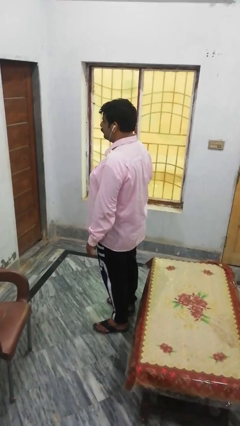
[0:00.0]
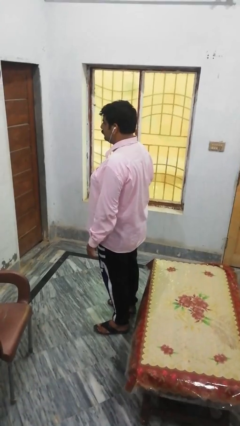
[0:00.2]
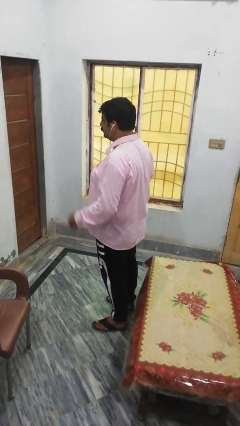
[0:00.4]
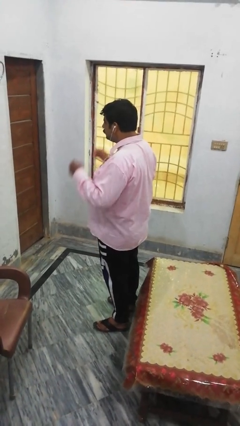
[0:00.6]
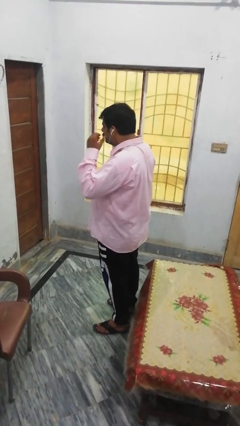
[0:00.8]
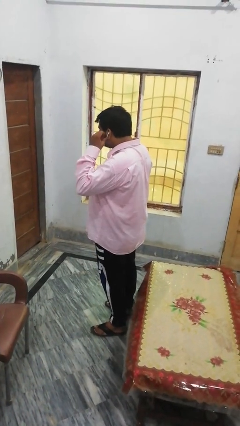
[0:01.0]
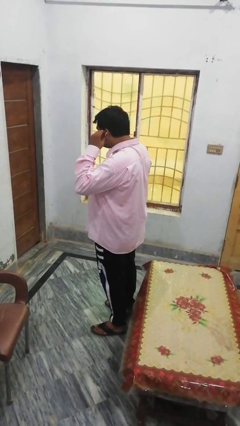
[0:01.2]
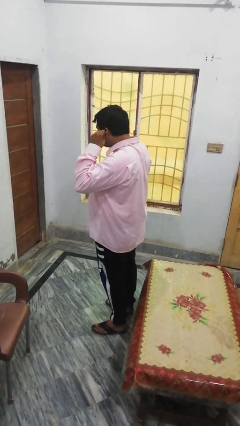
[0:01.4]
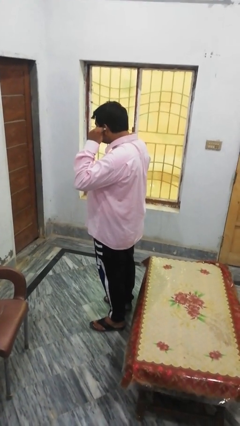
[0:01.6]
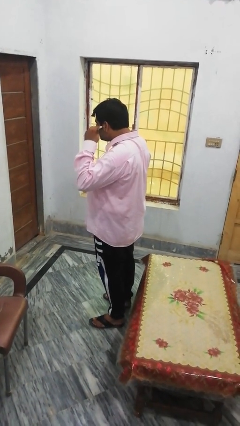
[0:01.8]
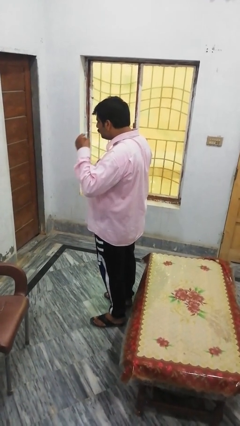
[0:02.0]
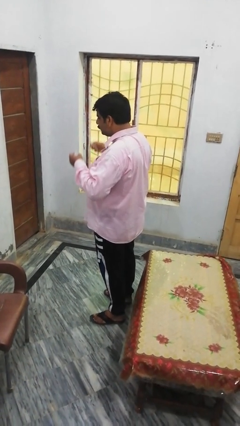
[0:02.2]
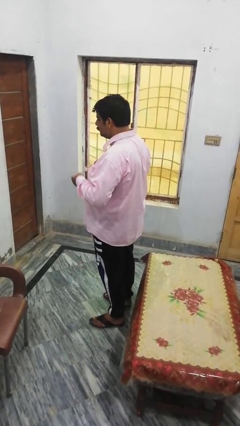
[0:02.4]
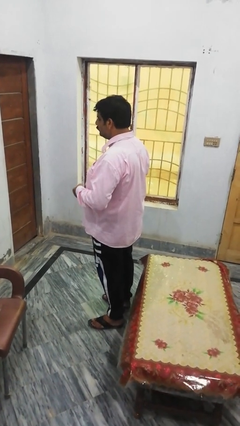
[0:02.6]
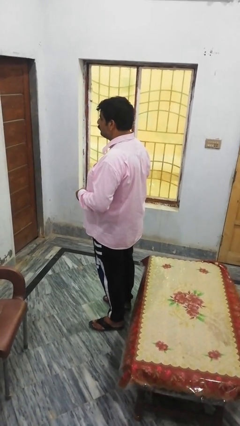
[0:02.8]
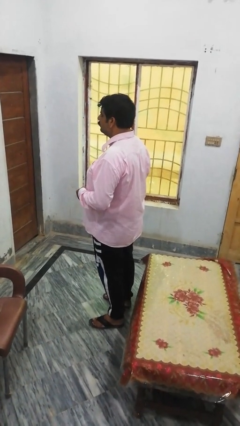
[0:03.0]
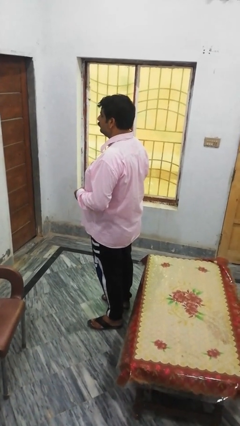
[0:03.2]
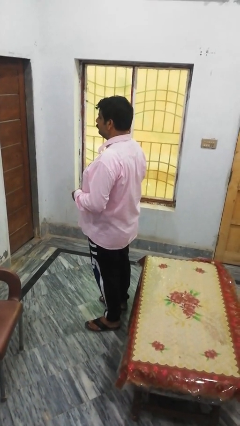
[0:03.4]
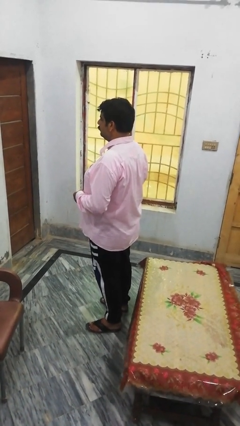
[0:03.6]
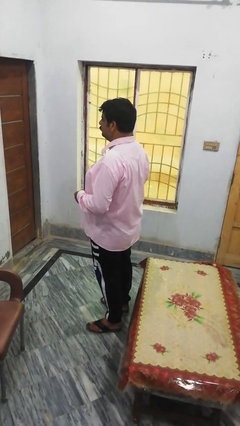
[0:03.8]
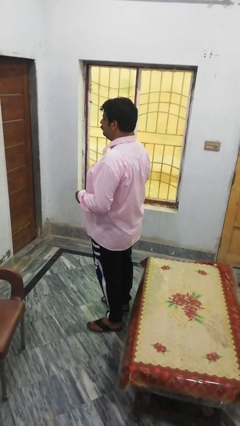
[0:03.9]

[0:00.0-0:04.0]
person takes off headphones

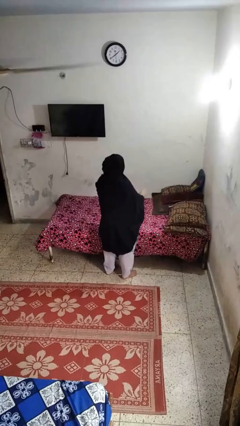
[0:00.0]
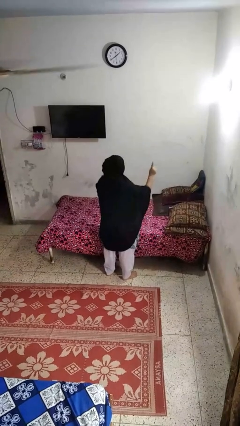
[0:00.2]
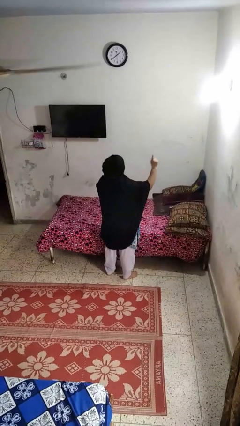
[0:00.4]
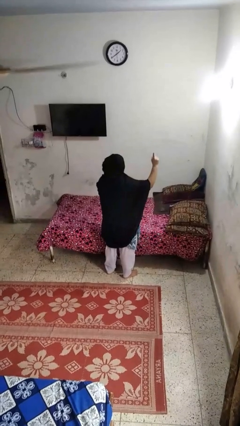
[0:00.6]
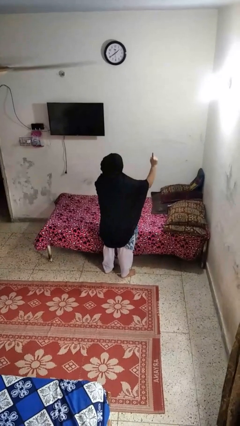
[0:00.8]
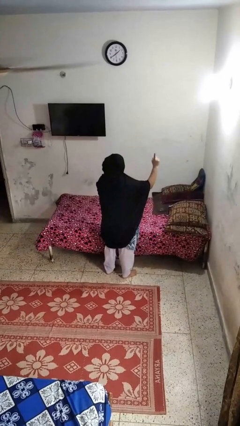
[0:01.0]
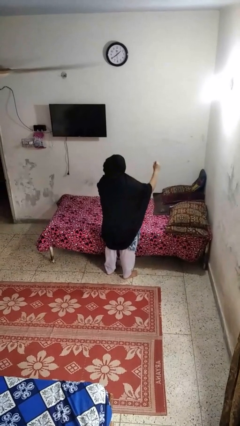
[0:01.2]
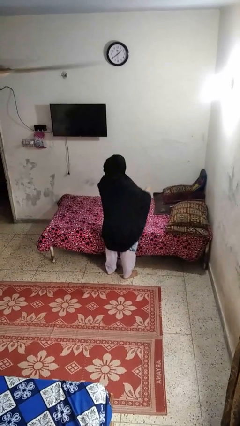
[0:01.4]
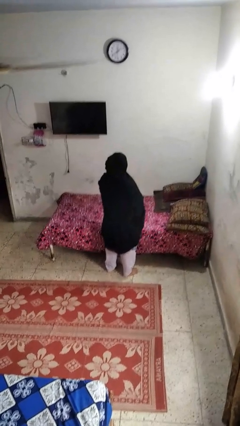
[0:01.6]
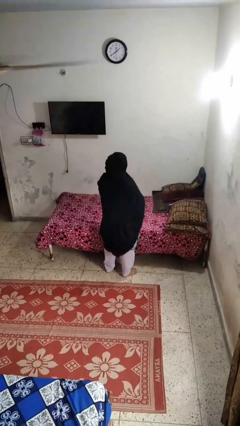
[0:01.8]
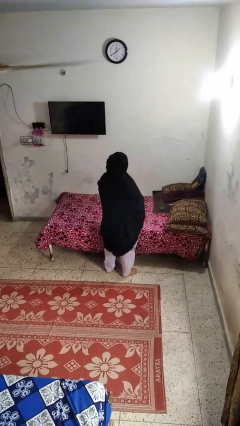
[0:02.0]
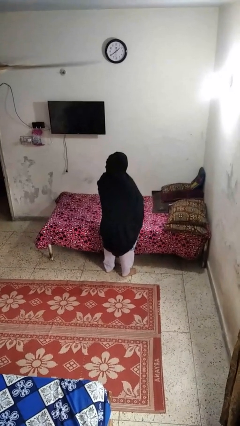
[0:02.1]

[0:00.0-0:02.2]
person gestures number one

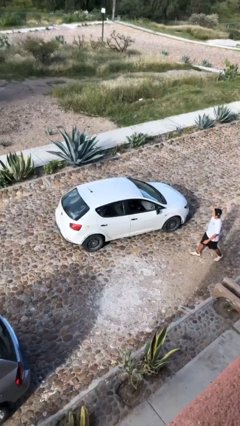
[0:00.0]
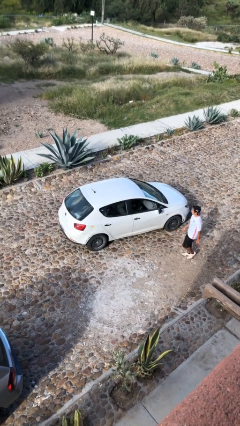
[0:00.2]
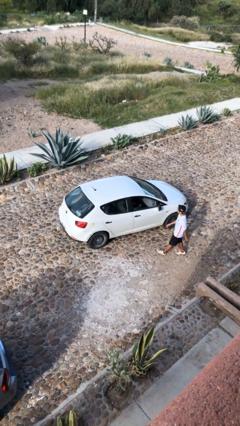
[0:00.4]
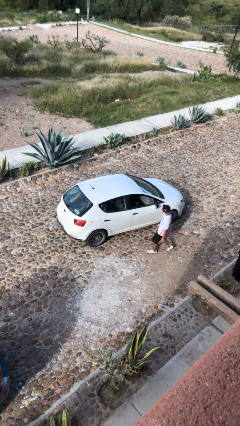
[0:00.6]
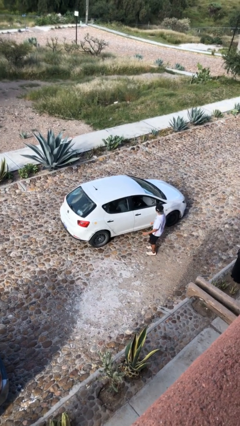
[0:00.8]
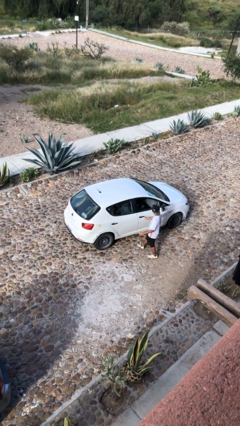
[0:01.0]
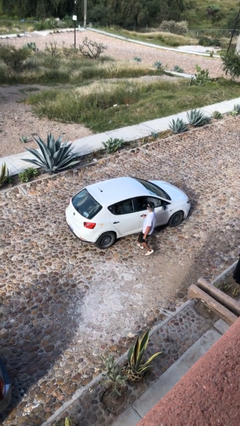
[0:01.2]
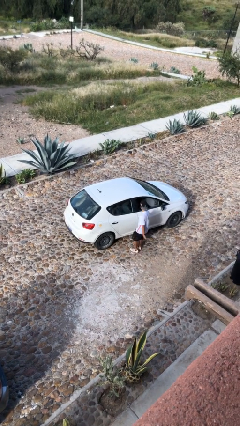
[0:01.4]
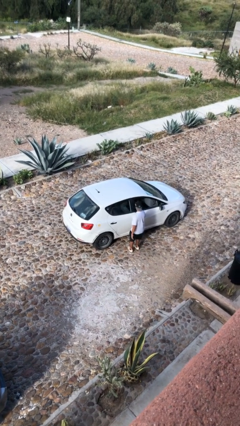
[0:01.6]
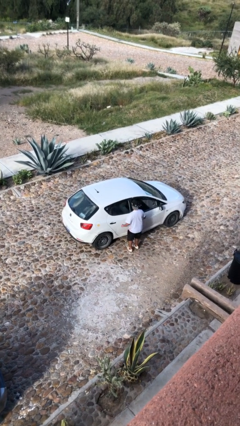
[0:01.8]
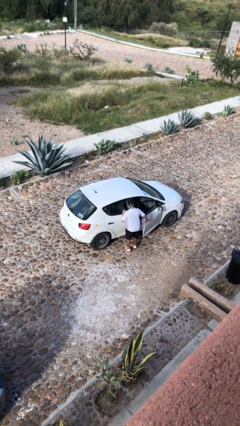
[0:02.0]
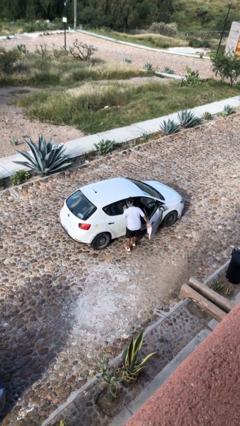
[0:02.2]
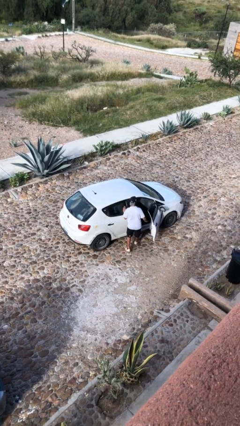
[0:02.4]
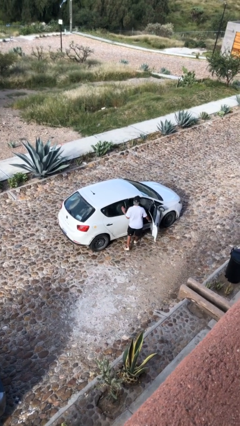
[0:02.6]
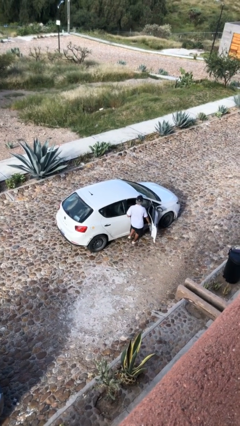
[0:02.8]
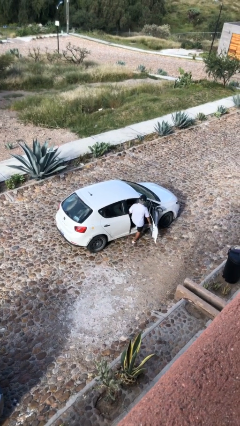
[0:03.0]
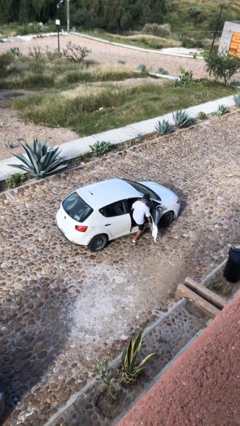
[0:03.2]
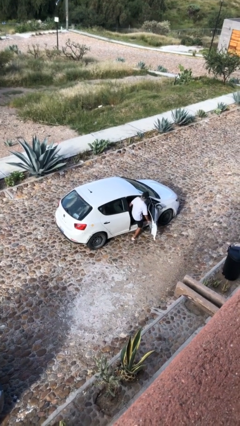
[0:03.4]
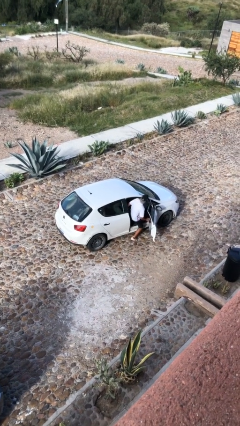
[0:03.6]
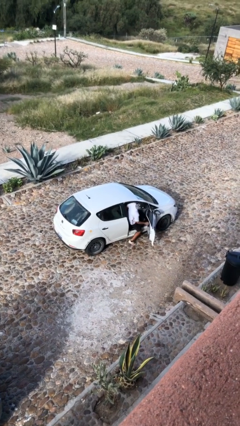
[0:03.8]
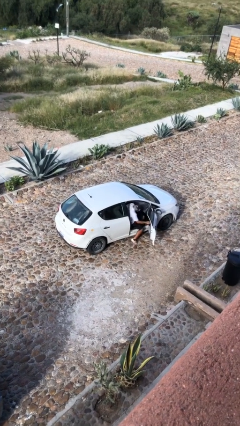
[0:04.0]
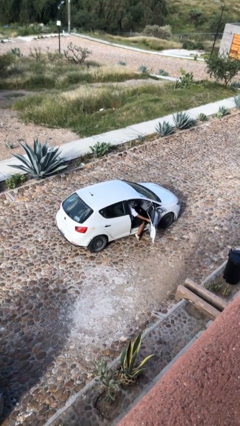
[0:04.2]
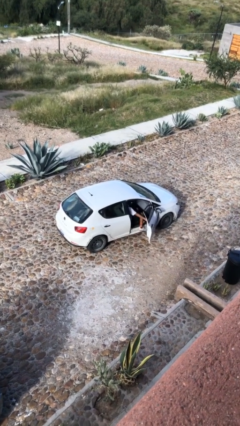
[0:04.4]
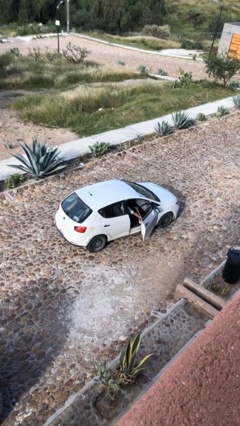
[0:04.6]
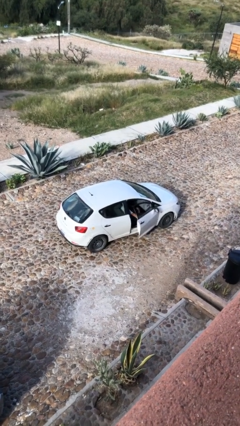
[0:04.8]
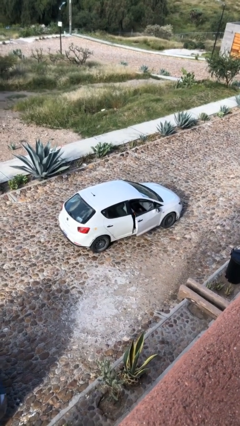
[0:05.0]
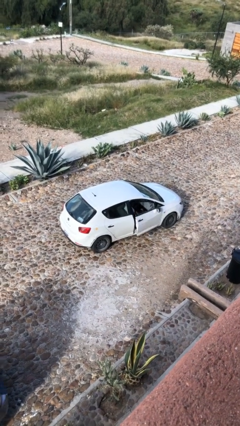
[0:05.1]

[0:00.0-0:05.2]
car picks up person

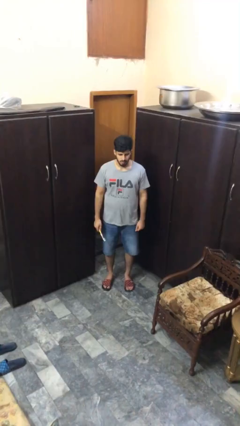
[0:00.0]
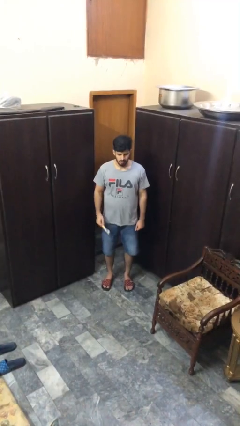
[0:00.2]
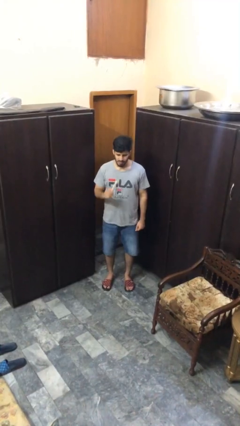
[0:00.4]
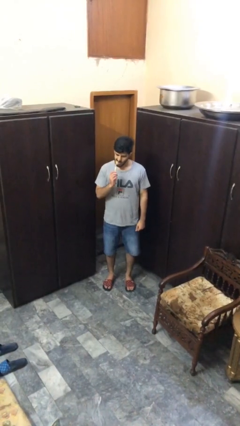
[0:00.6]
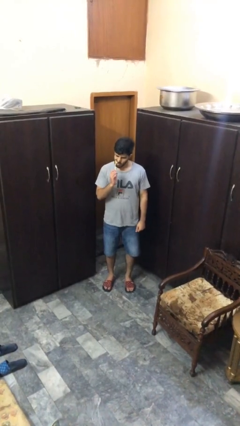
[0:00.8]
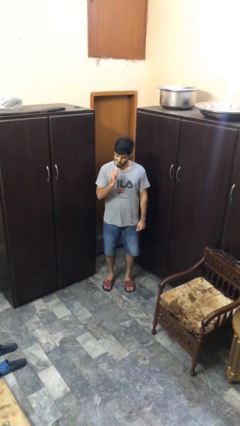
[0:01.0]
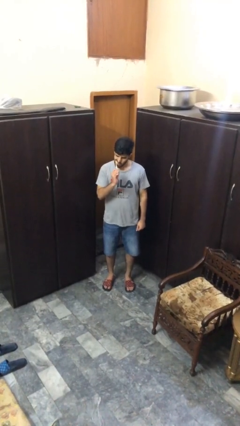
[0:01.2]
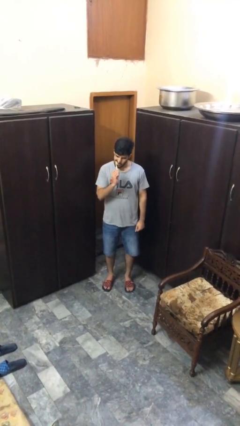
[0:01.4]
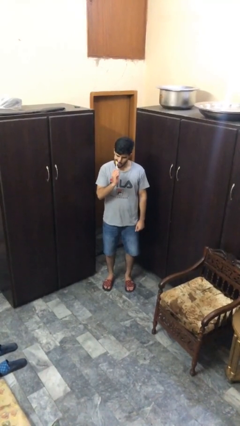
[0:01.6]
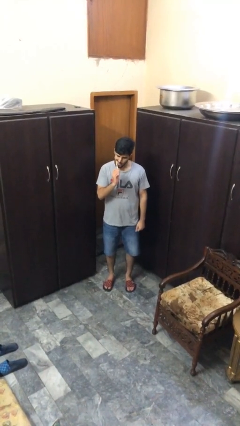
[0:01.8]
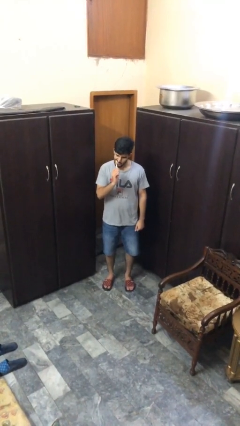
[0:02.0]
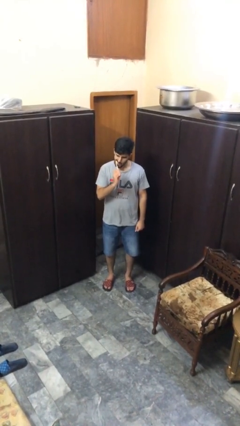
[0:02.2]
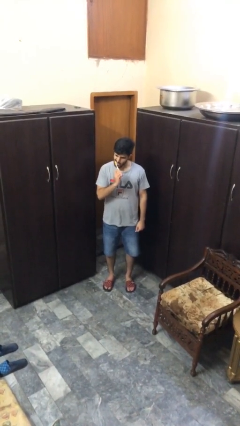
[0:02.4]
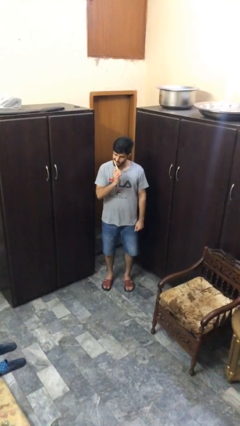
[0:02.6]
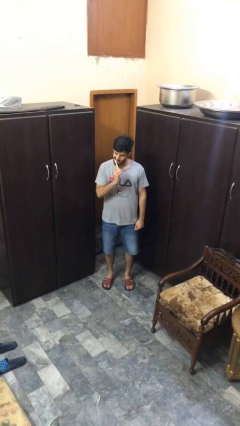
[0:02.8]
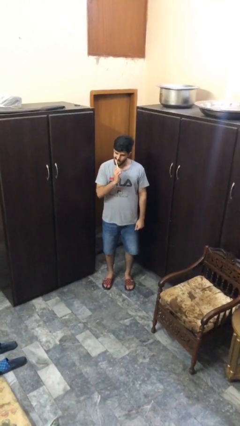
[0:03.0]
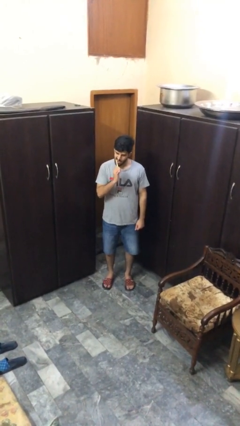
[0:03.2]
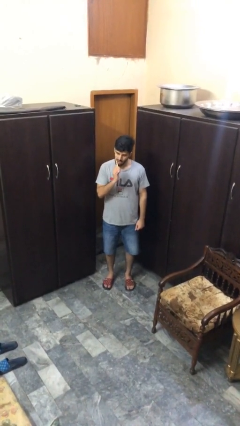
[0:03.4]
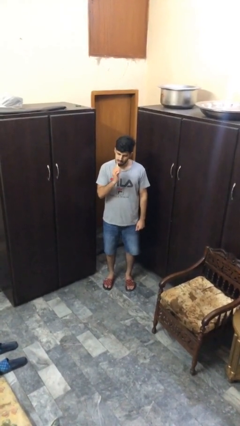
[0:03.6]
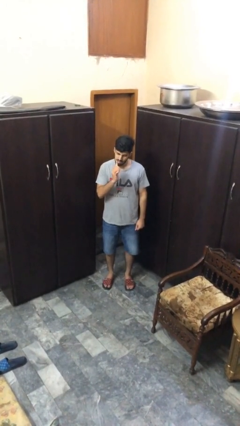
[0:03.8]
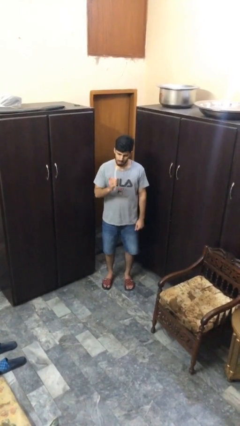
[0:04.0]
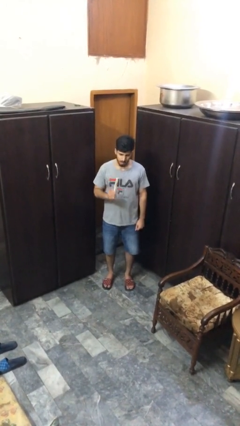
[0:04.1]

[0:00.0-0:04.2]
person brushes teeth

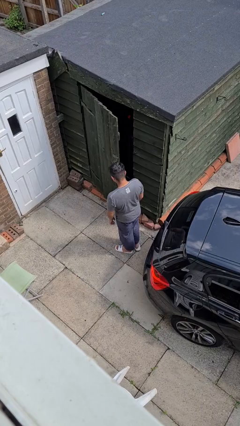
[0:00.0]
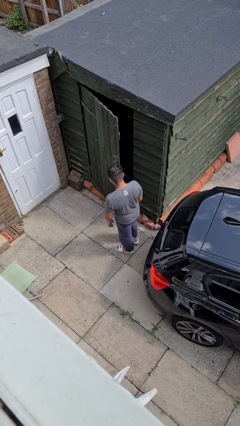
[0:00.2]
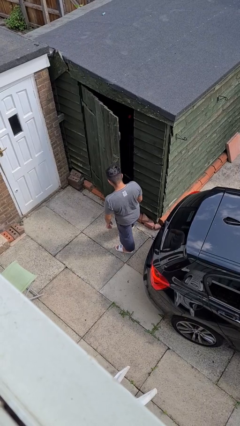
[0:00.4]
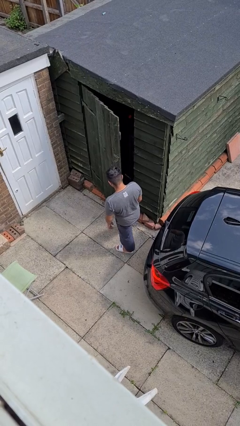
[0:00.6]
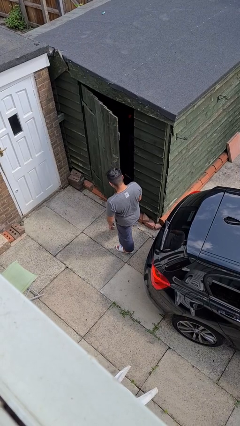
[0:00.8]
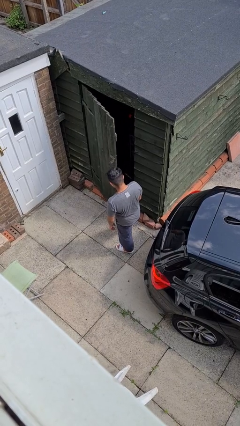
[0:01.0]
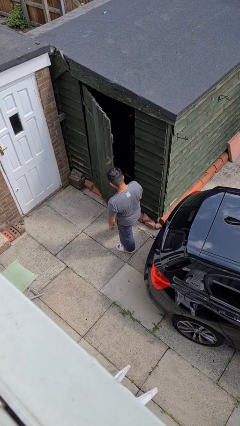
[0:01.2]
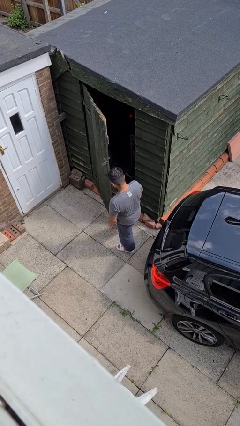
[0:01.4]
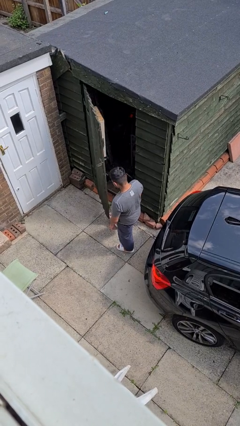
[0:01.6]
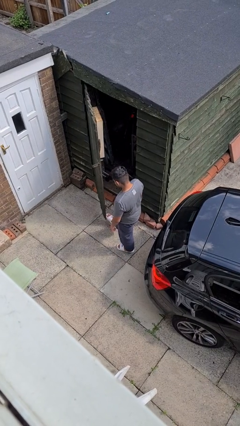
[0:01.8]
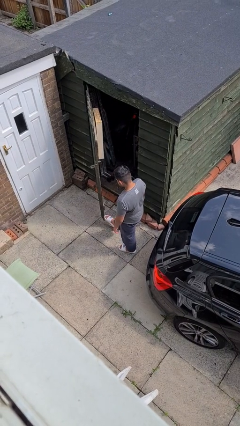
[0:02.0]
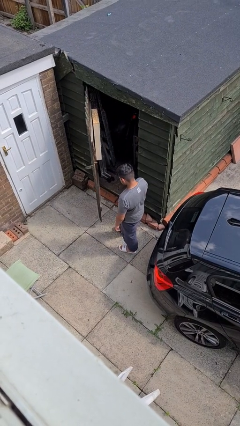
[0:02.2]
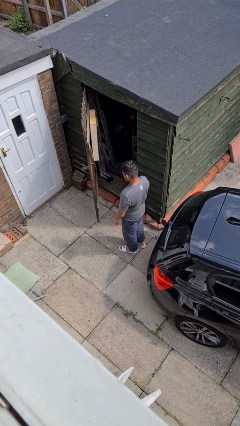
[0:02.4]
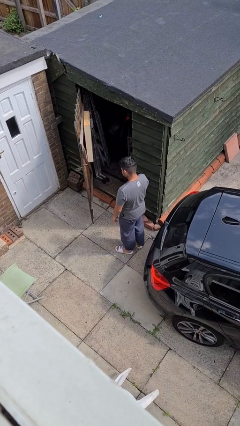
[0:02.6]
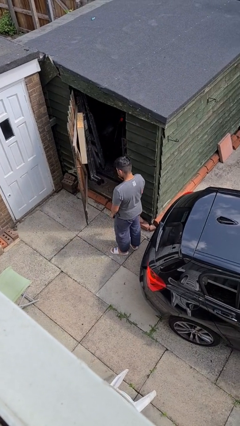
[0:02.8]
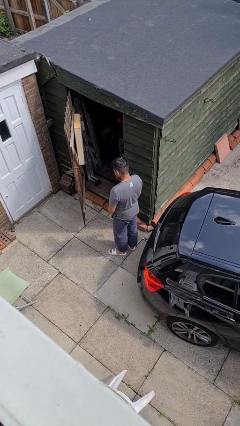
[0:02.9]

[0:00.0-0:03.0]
person opens facility door
